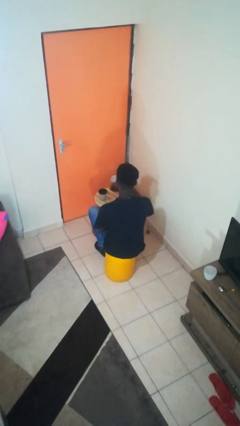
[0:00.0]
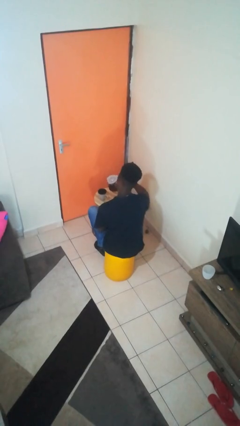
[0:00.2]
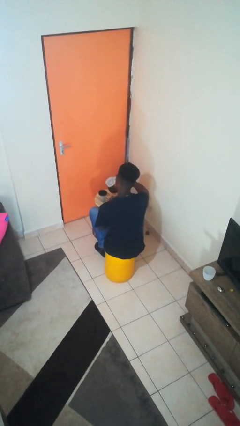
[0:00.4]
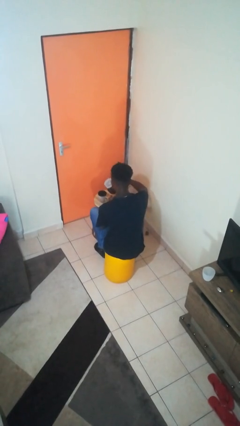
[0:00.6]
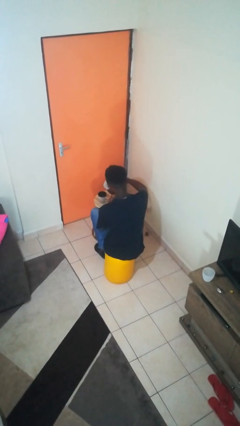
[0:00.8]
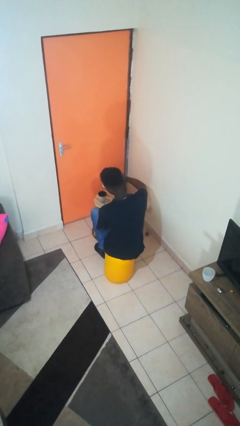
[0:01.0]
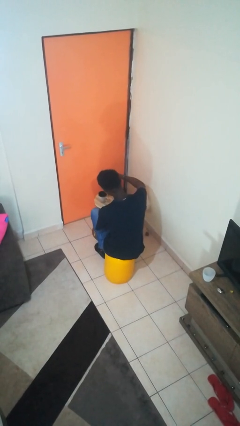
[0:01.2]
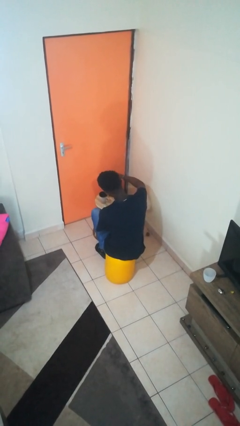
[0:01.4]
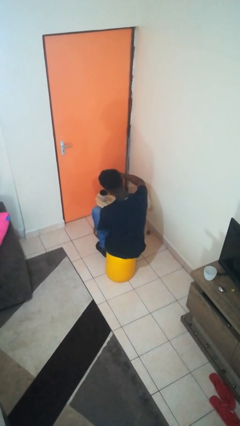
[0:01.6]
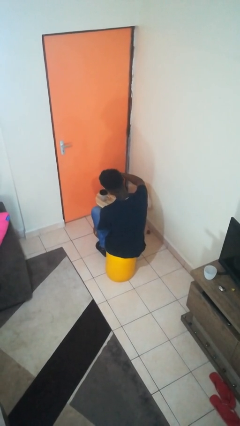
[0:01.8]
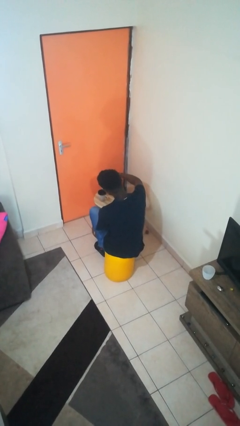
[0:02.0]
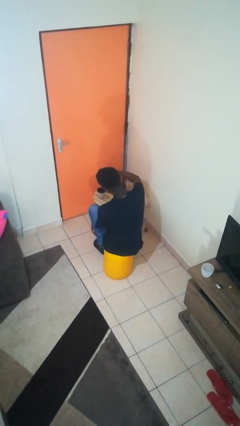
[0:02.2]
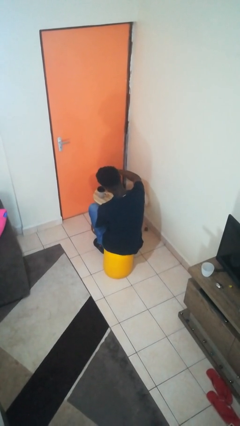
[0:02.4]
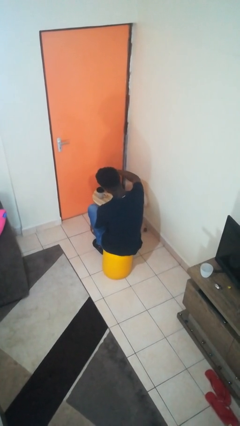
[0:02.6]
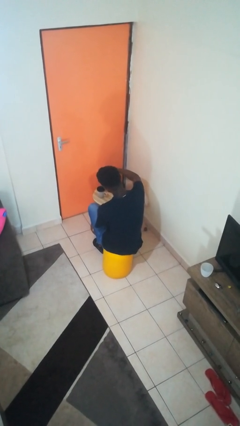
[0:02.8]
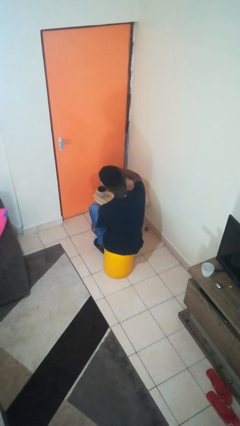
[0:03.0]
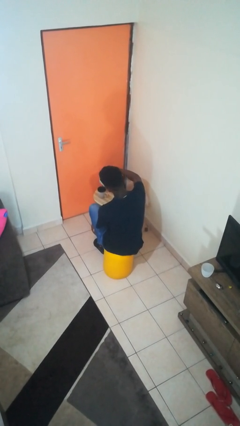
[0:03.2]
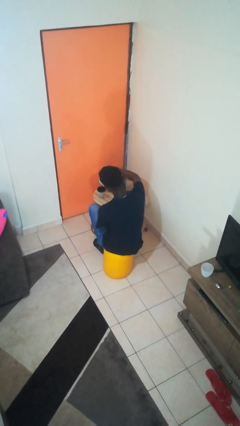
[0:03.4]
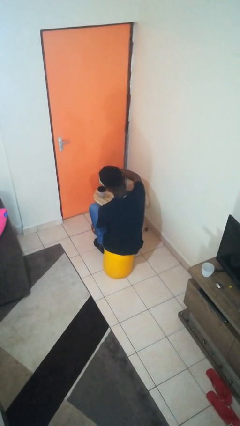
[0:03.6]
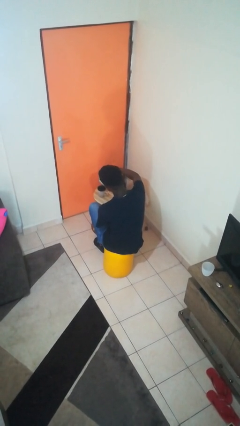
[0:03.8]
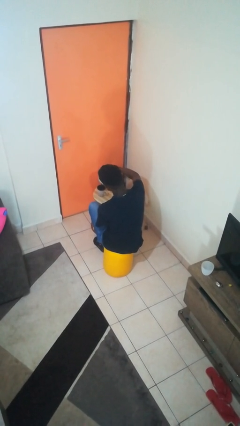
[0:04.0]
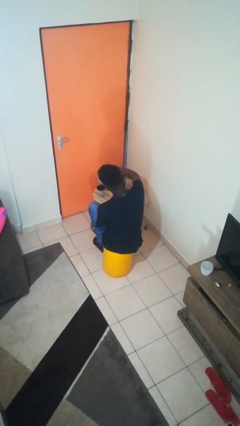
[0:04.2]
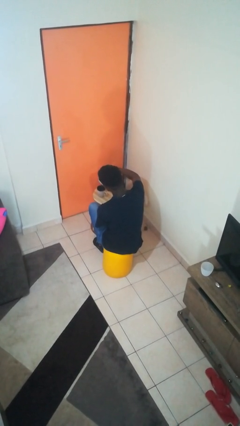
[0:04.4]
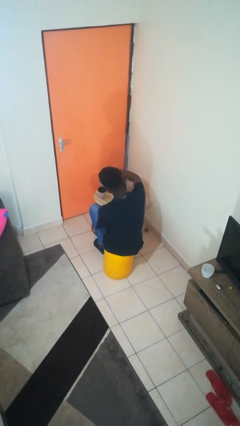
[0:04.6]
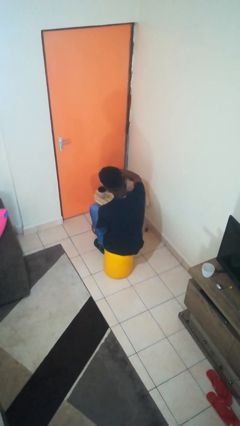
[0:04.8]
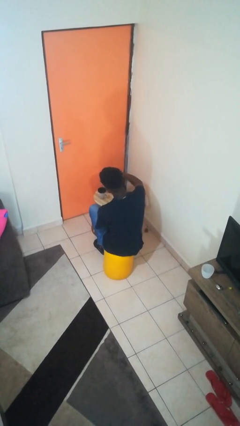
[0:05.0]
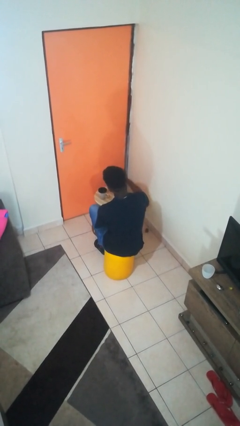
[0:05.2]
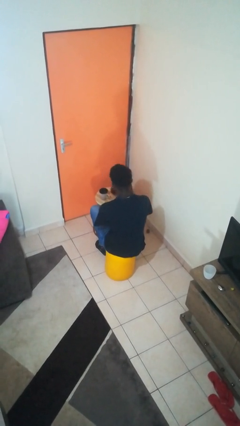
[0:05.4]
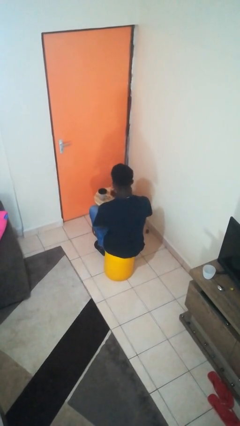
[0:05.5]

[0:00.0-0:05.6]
person pours coffee into mug

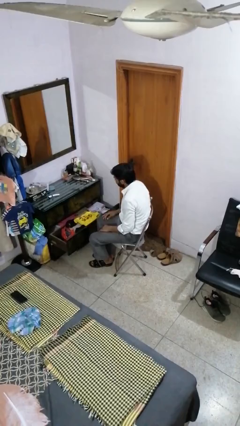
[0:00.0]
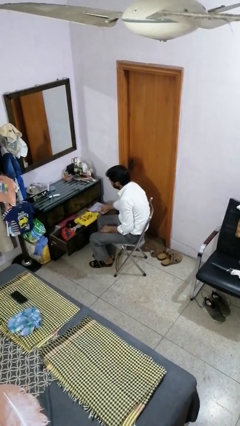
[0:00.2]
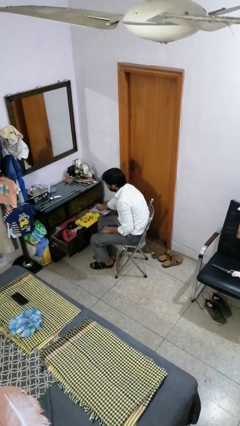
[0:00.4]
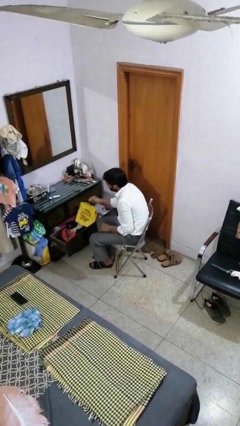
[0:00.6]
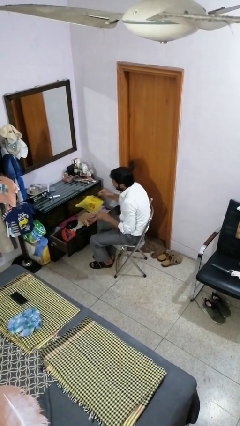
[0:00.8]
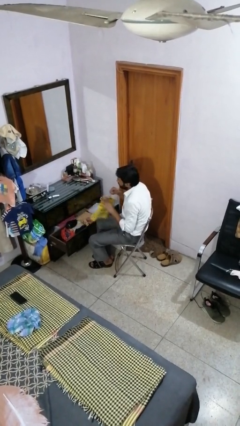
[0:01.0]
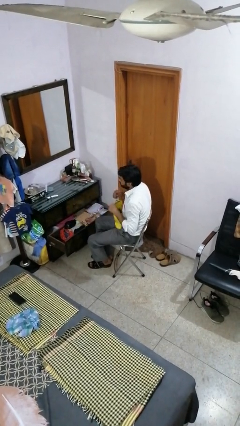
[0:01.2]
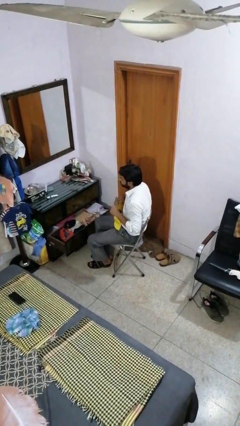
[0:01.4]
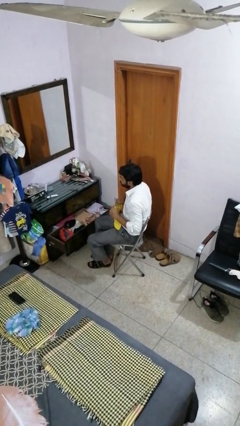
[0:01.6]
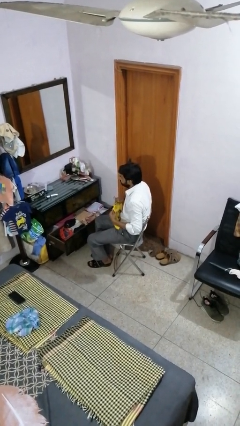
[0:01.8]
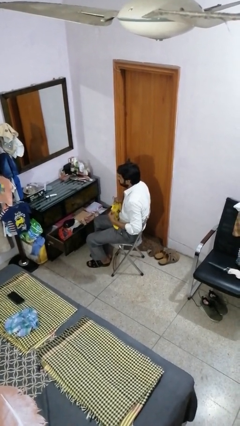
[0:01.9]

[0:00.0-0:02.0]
person takes clothes from dresser

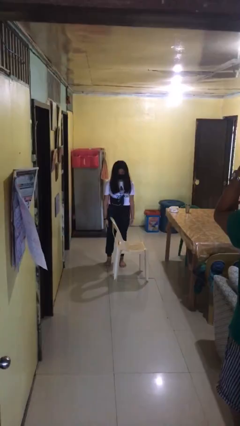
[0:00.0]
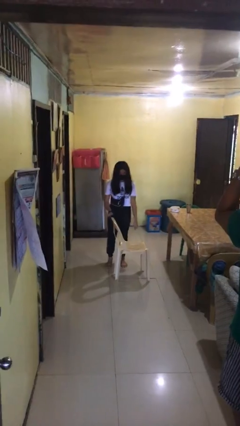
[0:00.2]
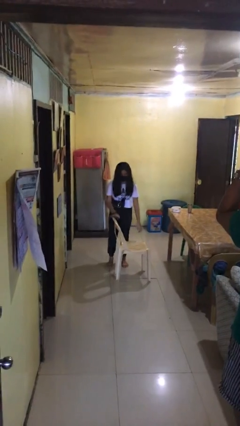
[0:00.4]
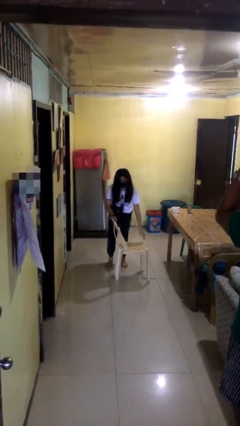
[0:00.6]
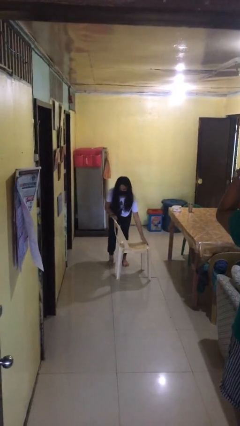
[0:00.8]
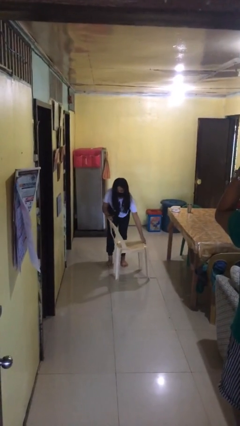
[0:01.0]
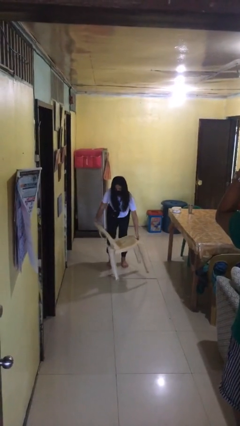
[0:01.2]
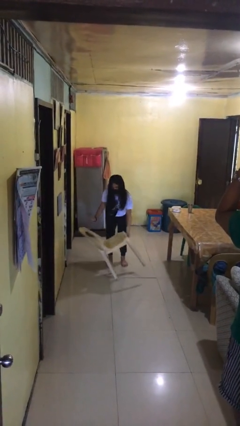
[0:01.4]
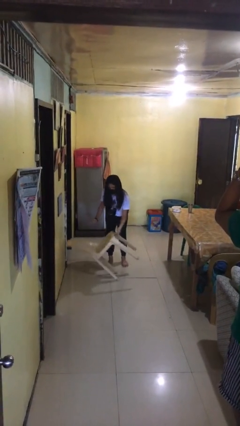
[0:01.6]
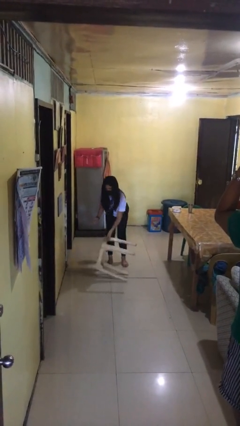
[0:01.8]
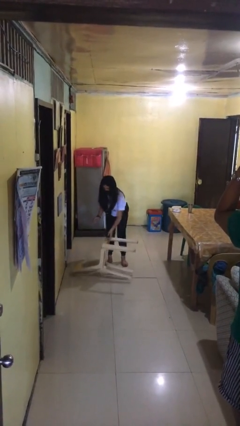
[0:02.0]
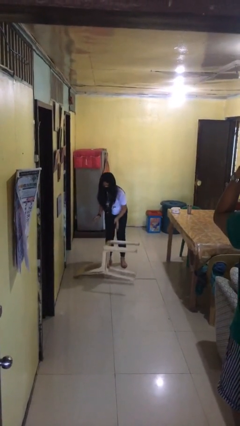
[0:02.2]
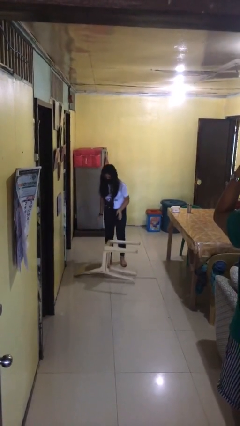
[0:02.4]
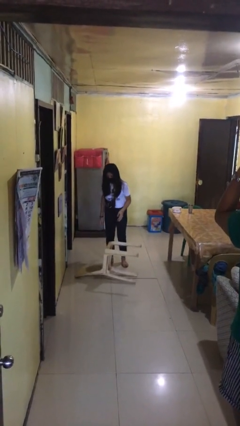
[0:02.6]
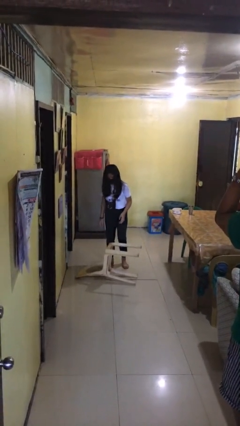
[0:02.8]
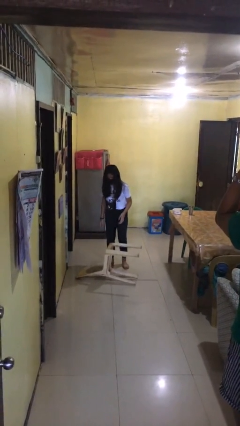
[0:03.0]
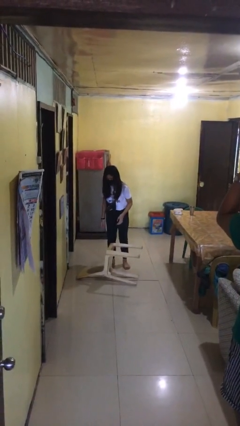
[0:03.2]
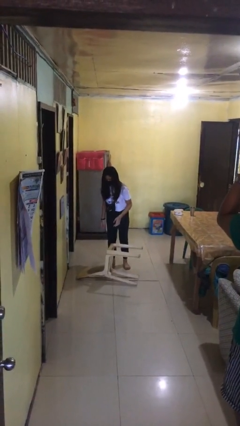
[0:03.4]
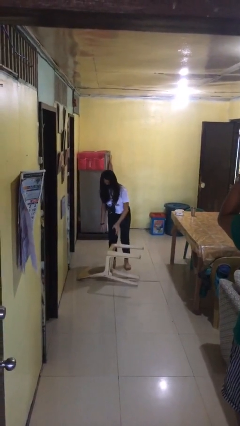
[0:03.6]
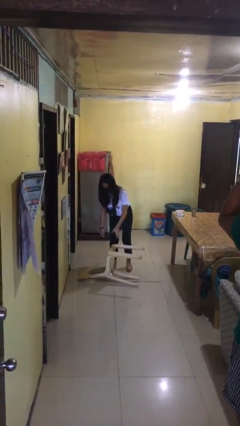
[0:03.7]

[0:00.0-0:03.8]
person knocks over furniture

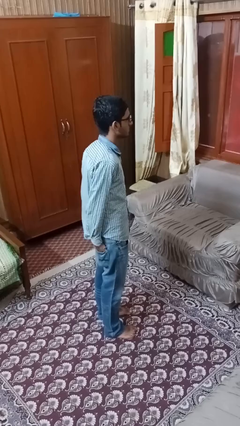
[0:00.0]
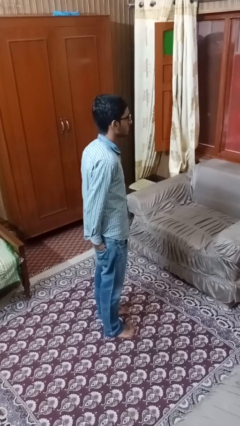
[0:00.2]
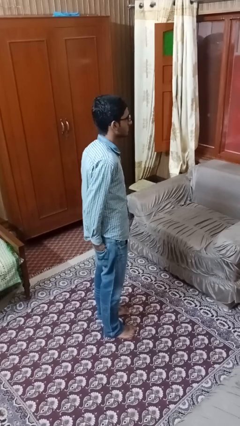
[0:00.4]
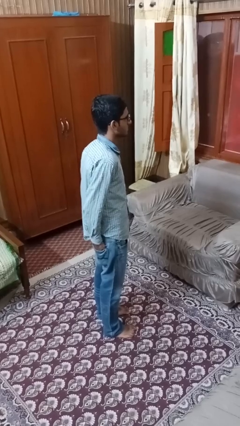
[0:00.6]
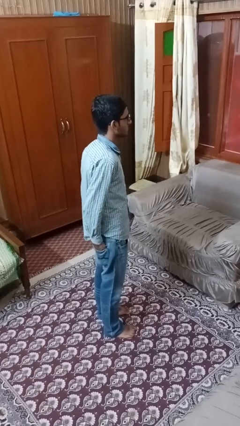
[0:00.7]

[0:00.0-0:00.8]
person puts hands in back pockets

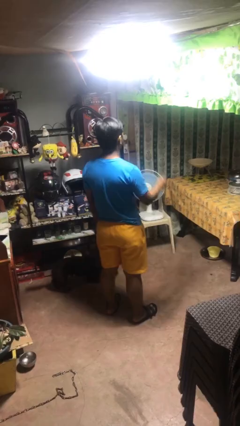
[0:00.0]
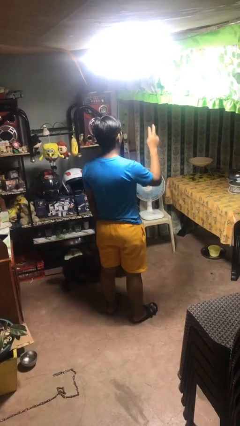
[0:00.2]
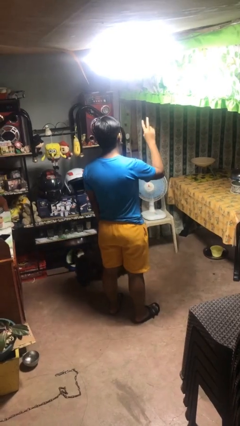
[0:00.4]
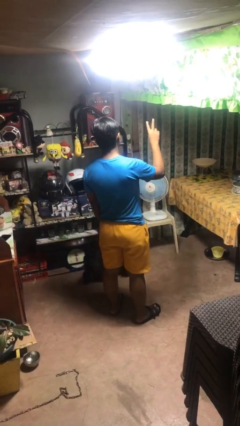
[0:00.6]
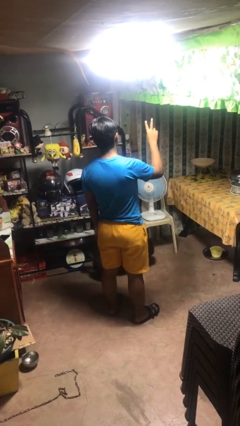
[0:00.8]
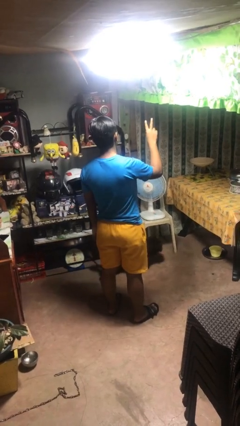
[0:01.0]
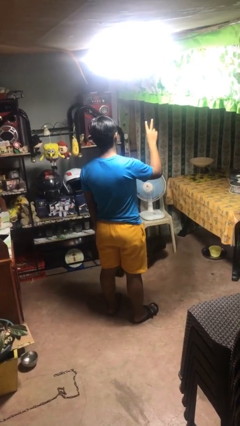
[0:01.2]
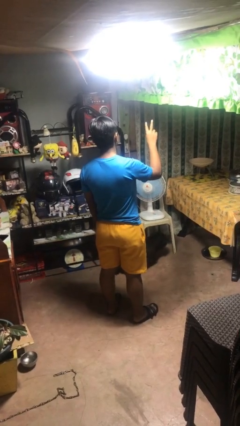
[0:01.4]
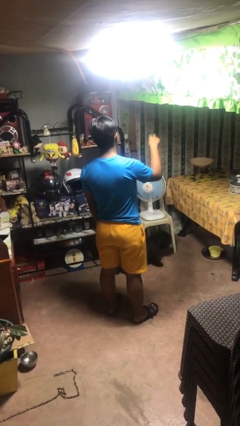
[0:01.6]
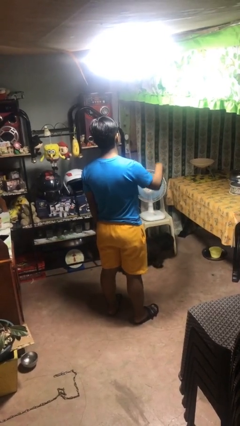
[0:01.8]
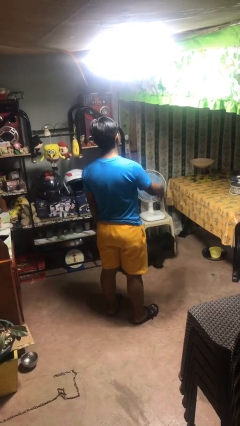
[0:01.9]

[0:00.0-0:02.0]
person gestures peace

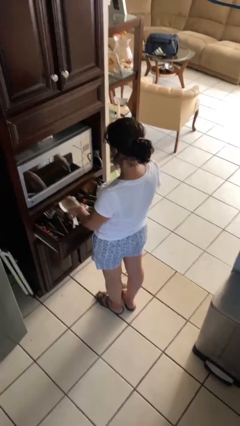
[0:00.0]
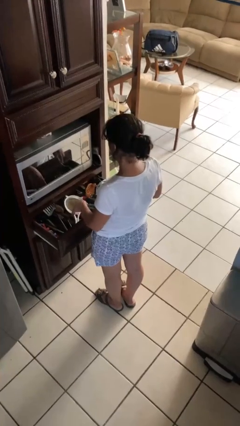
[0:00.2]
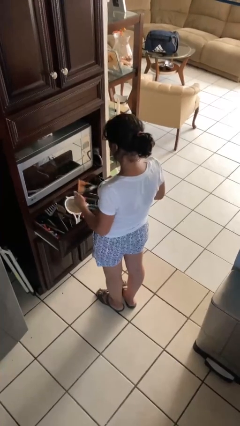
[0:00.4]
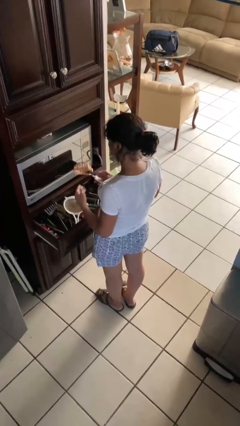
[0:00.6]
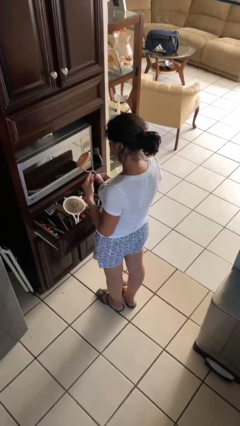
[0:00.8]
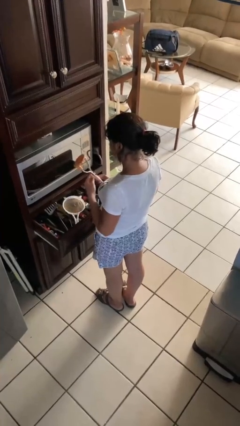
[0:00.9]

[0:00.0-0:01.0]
person takes object from kitchen drawer

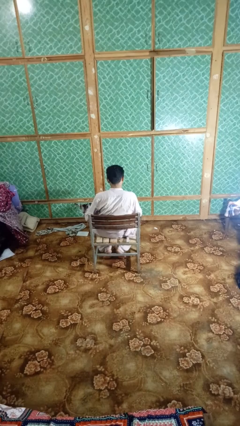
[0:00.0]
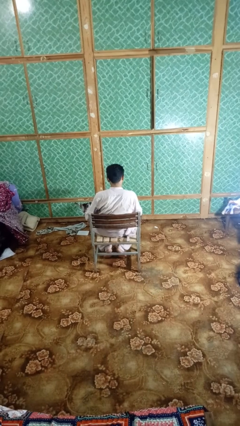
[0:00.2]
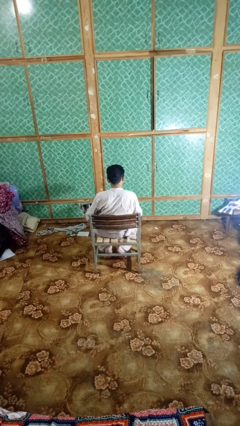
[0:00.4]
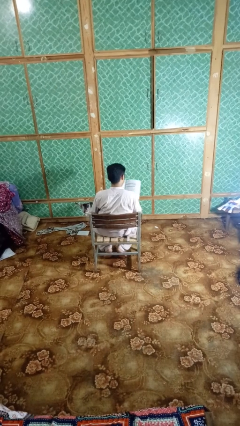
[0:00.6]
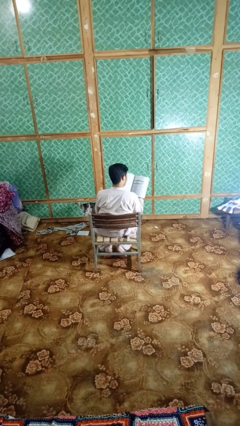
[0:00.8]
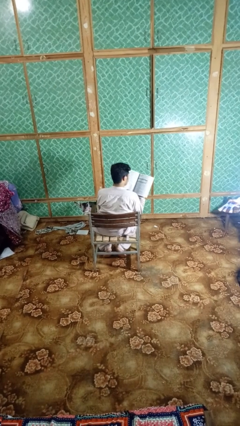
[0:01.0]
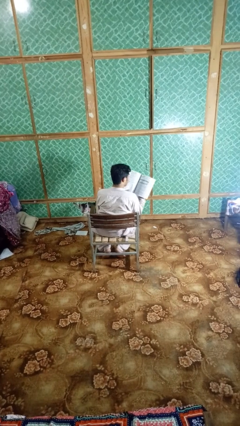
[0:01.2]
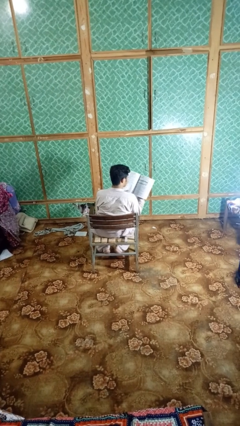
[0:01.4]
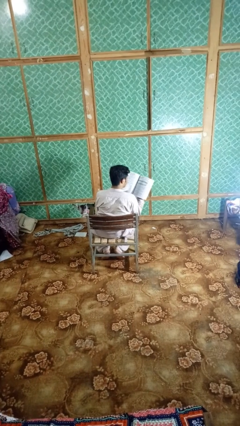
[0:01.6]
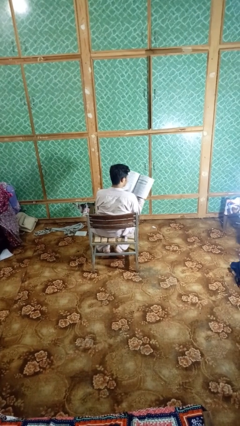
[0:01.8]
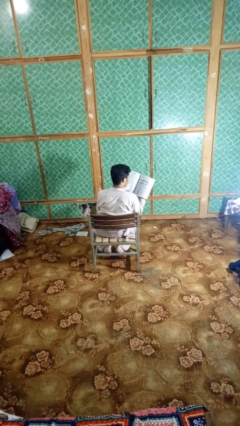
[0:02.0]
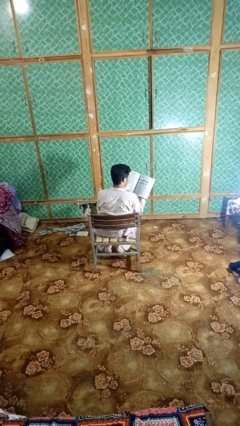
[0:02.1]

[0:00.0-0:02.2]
person reads book

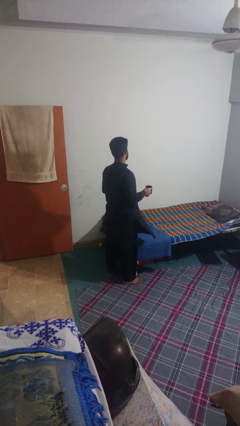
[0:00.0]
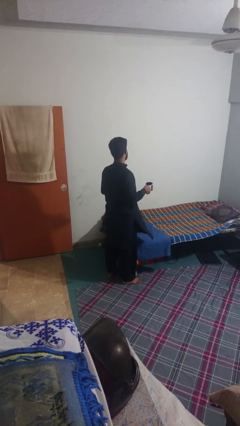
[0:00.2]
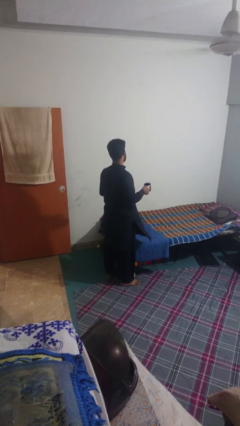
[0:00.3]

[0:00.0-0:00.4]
person drinks from mug
